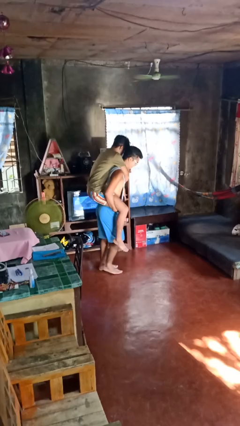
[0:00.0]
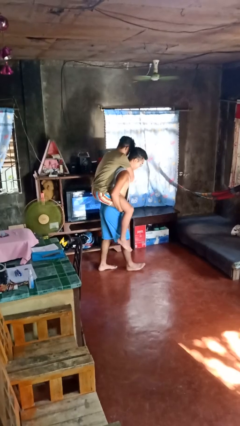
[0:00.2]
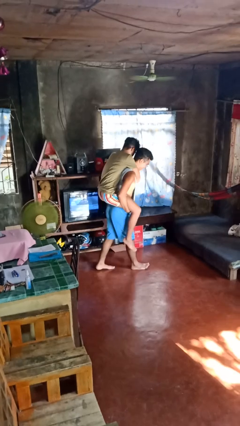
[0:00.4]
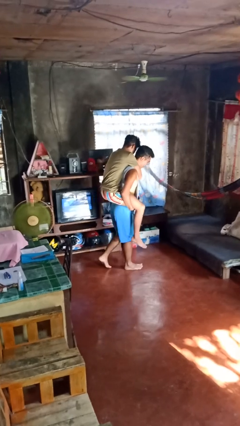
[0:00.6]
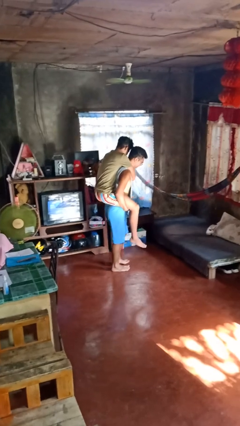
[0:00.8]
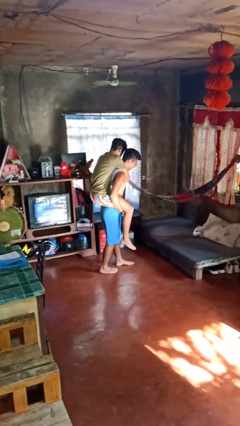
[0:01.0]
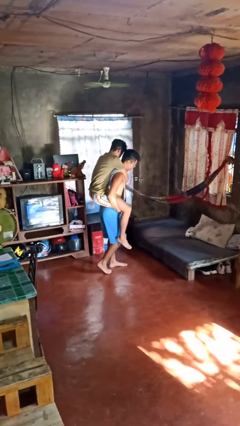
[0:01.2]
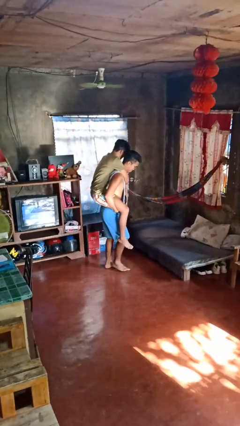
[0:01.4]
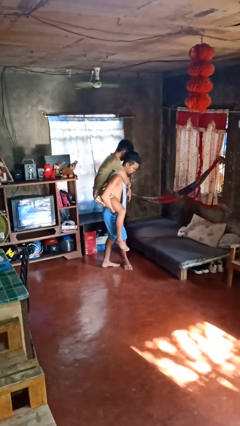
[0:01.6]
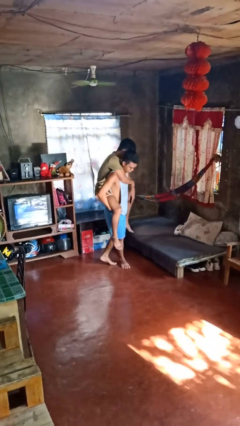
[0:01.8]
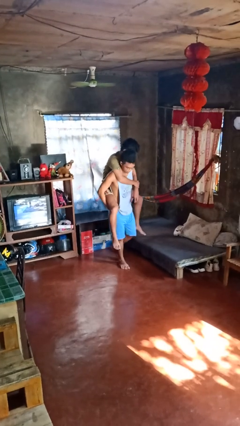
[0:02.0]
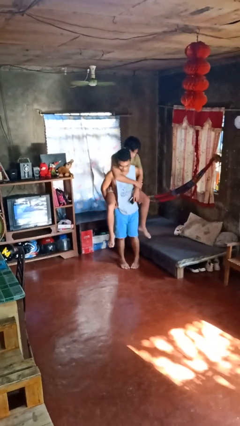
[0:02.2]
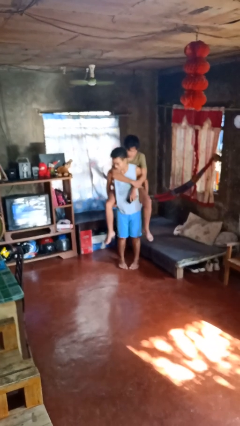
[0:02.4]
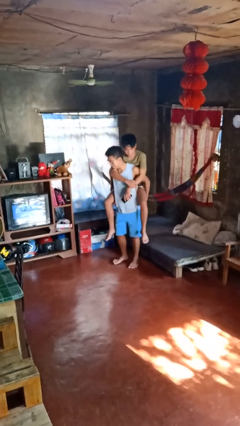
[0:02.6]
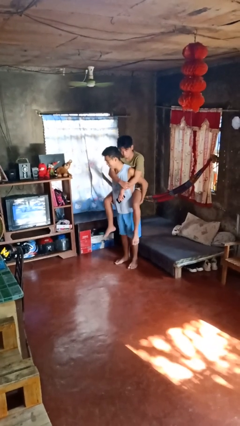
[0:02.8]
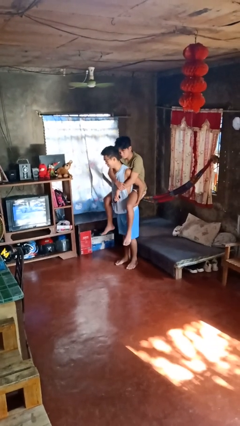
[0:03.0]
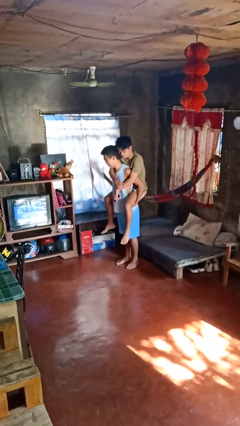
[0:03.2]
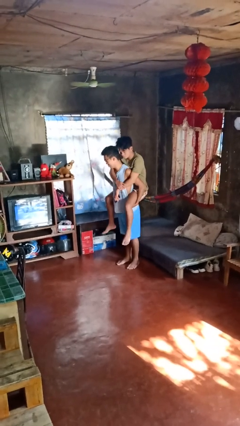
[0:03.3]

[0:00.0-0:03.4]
person carries person on back

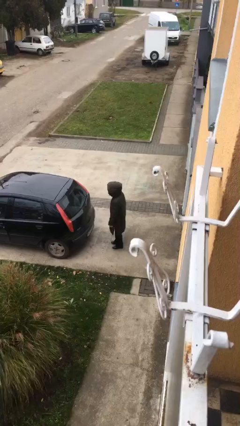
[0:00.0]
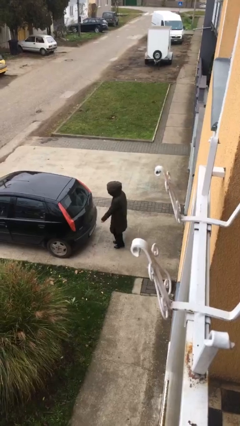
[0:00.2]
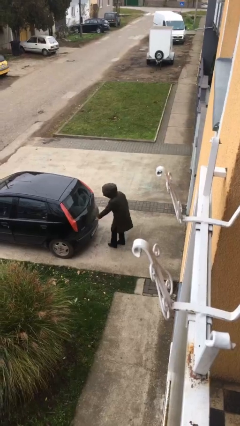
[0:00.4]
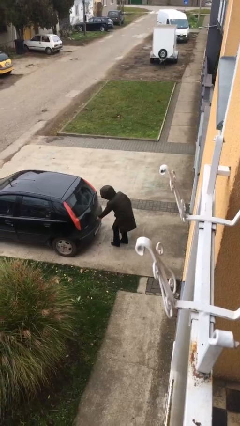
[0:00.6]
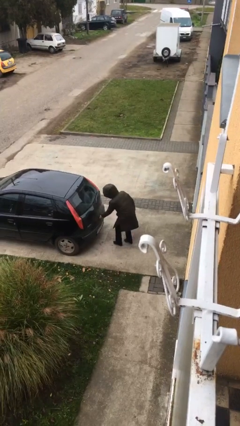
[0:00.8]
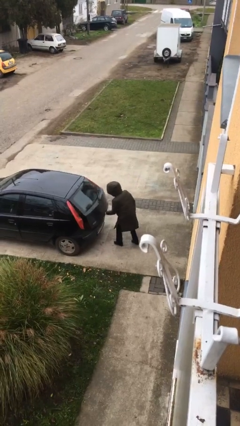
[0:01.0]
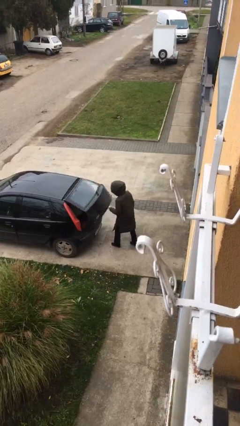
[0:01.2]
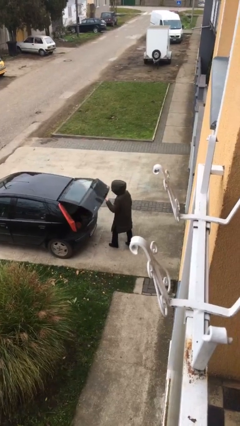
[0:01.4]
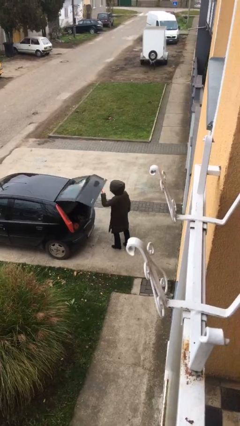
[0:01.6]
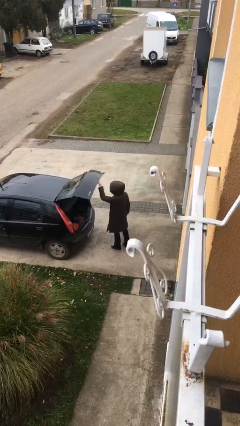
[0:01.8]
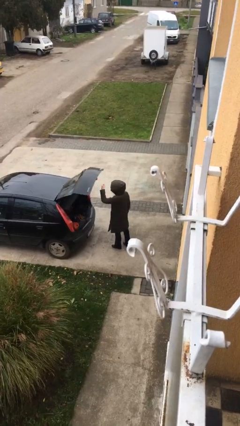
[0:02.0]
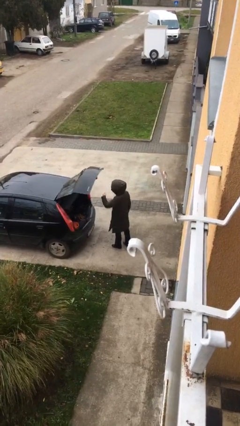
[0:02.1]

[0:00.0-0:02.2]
person opens car trunk

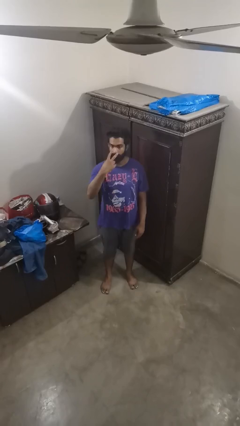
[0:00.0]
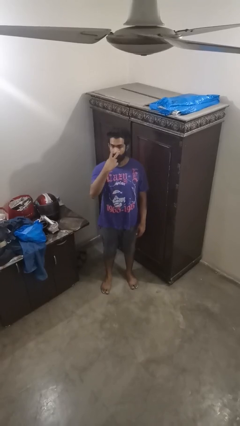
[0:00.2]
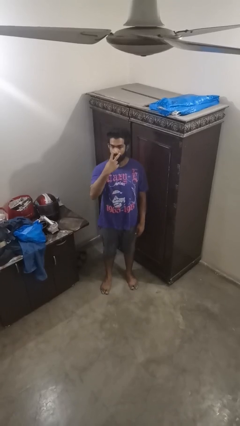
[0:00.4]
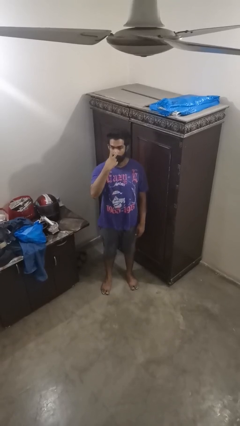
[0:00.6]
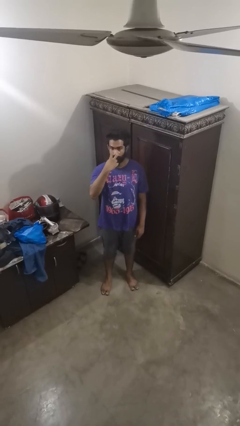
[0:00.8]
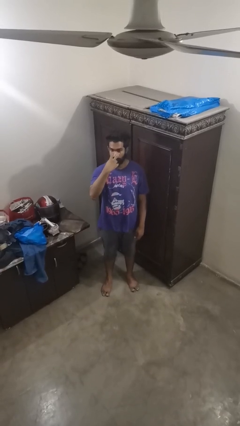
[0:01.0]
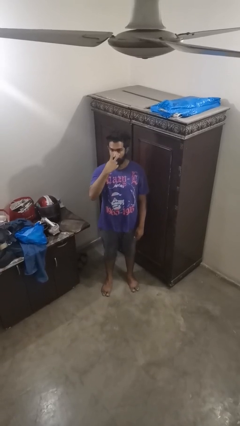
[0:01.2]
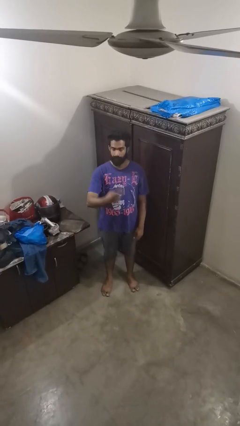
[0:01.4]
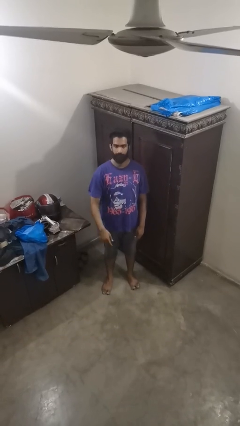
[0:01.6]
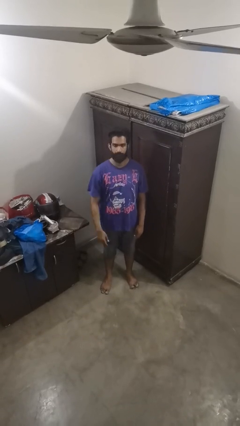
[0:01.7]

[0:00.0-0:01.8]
person gestures watch closely

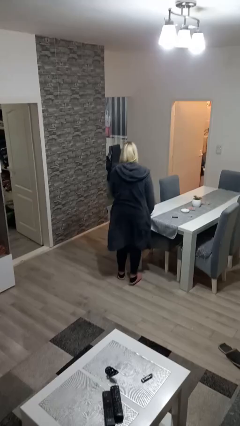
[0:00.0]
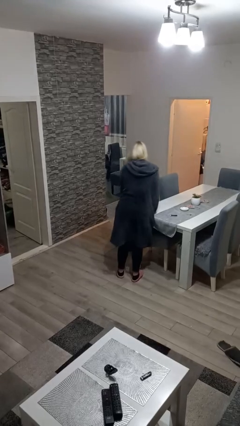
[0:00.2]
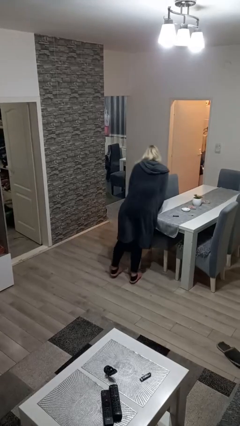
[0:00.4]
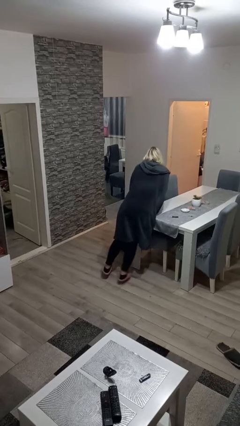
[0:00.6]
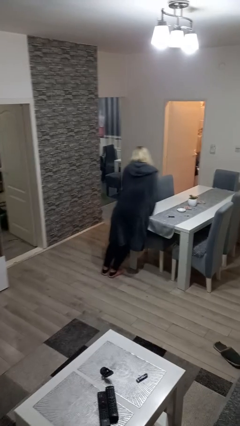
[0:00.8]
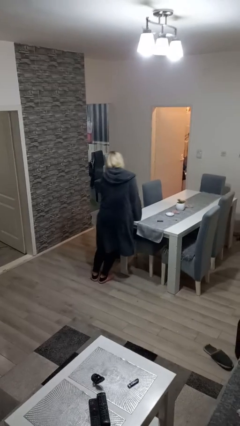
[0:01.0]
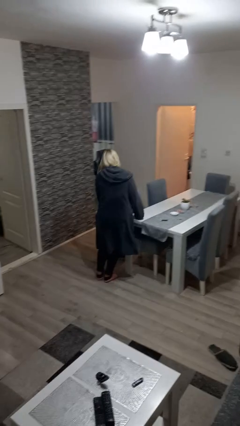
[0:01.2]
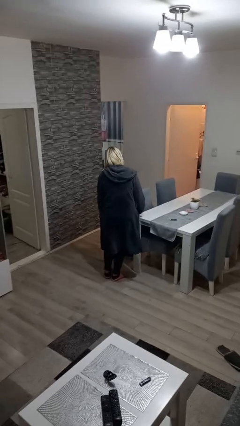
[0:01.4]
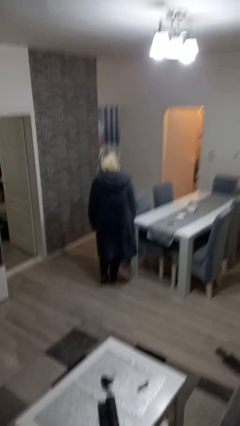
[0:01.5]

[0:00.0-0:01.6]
person bumps into table

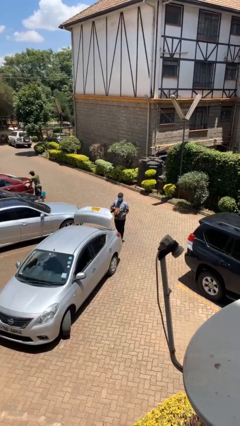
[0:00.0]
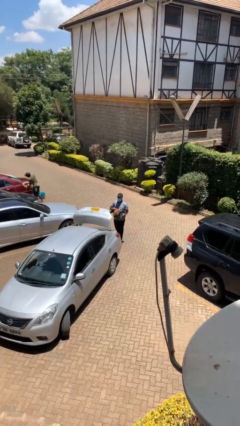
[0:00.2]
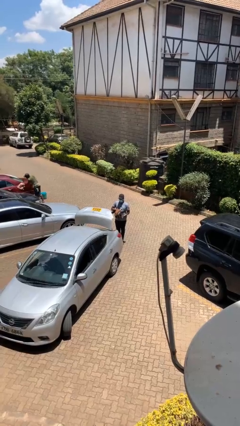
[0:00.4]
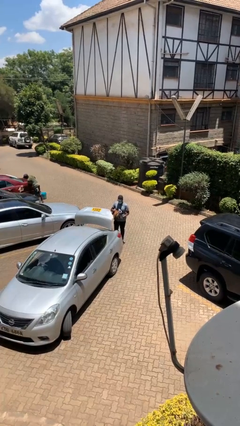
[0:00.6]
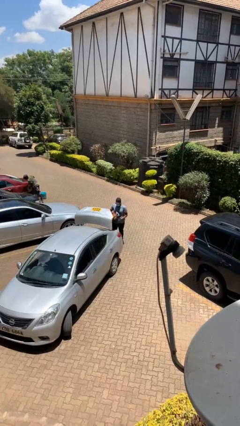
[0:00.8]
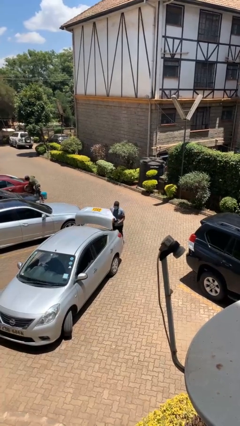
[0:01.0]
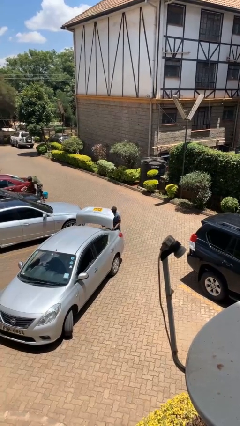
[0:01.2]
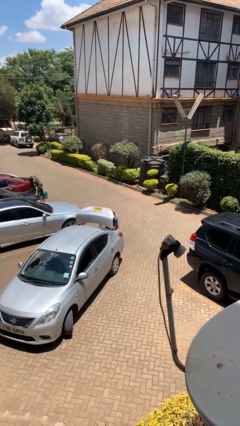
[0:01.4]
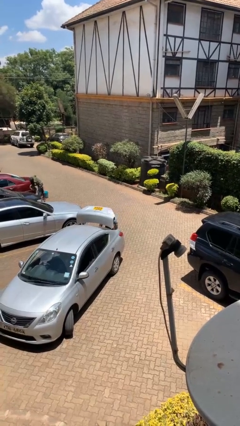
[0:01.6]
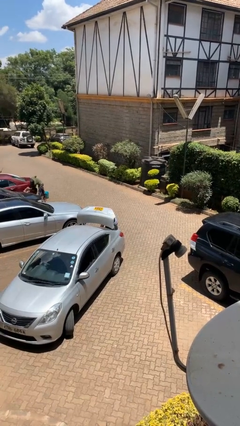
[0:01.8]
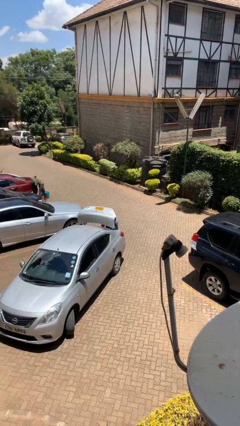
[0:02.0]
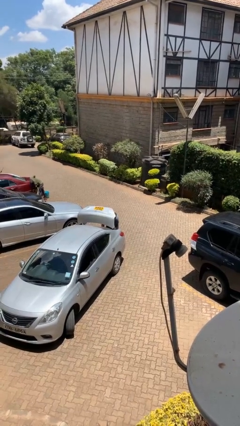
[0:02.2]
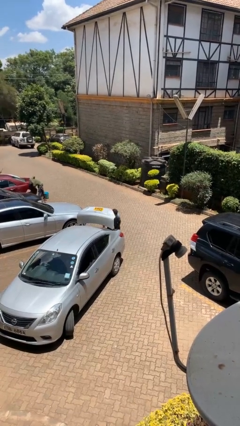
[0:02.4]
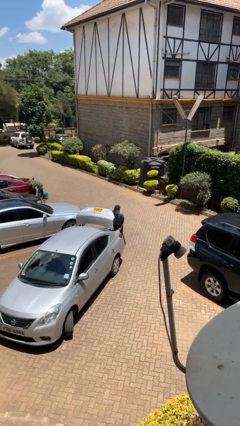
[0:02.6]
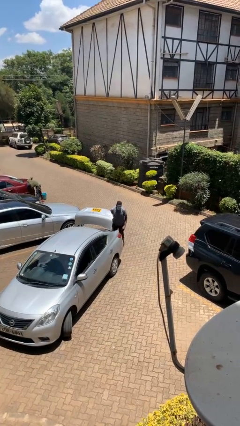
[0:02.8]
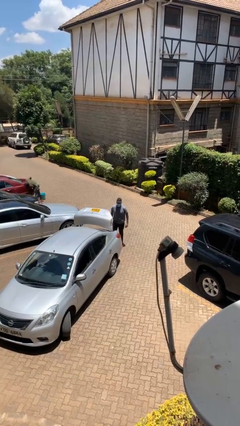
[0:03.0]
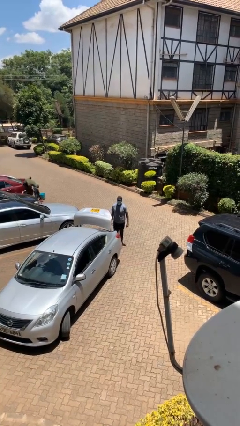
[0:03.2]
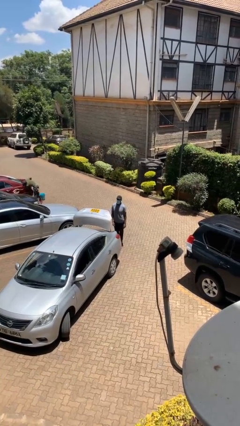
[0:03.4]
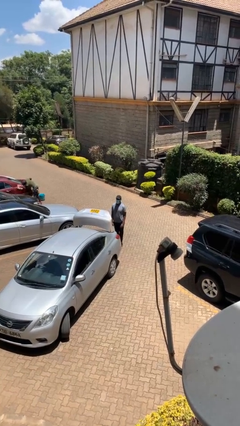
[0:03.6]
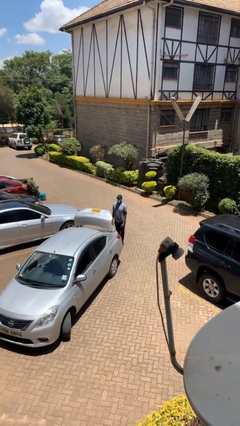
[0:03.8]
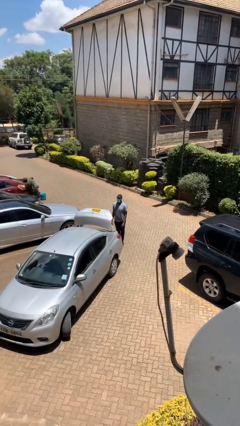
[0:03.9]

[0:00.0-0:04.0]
person loads car

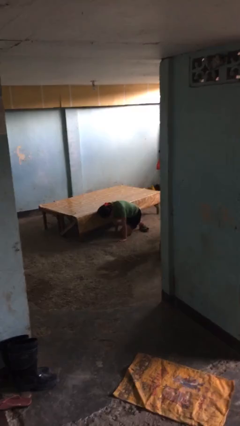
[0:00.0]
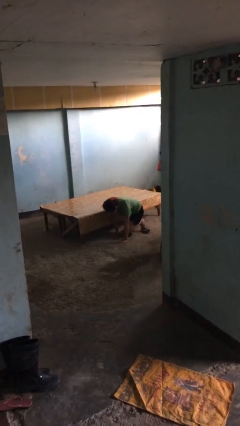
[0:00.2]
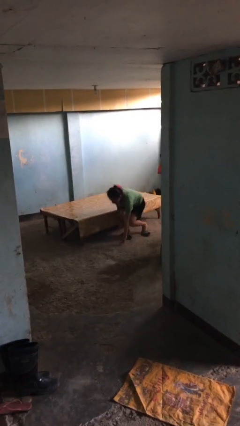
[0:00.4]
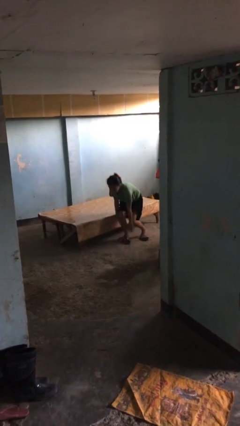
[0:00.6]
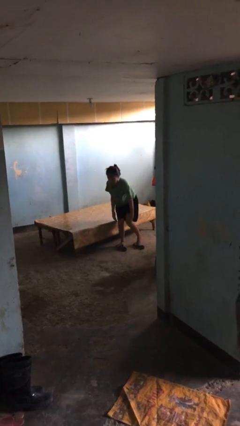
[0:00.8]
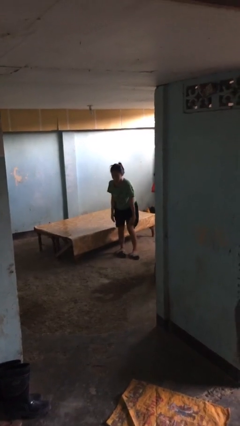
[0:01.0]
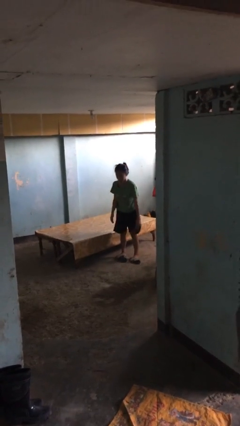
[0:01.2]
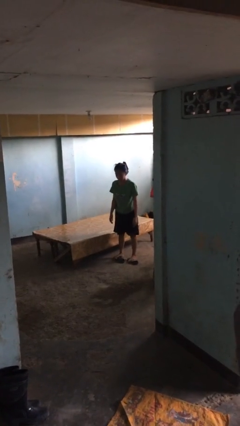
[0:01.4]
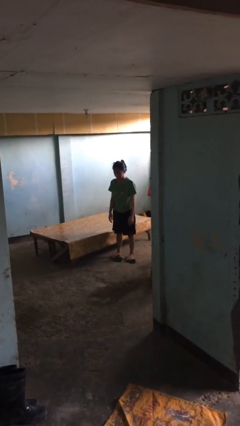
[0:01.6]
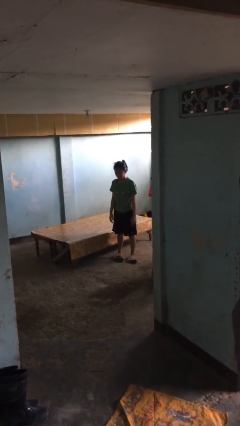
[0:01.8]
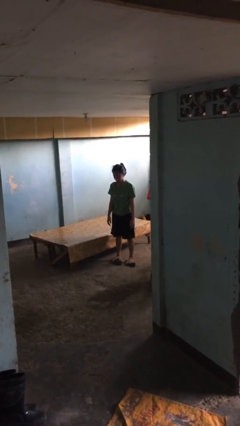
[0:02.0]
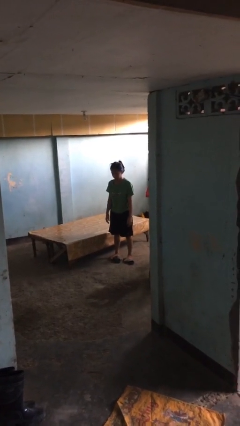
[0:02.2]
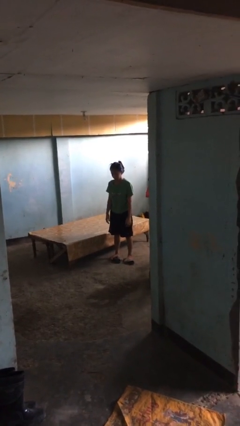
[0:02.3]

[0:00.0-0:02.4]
person stands up from floor

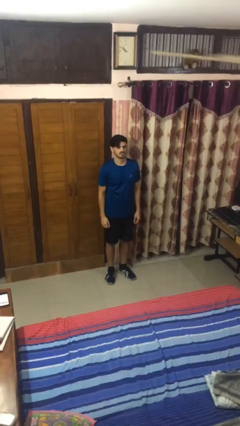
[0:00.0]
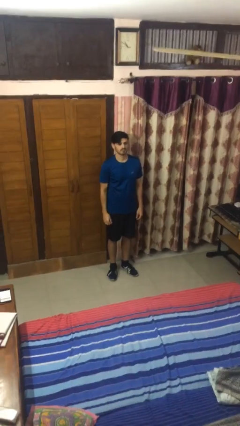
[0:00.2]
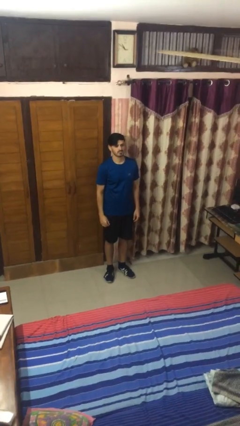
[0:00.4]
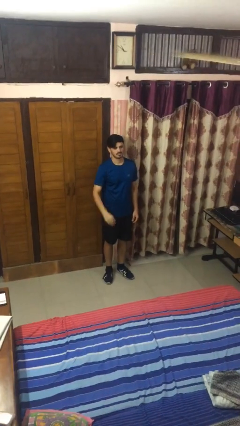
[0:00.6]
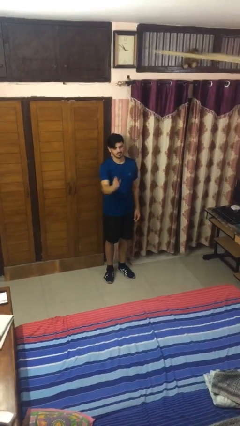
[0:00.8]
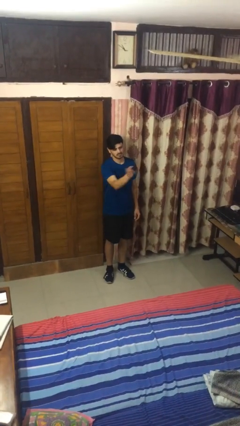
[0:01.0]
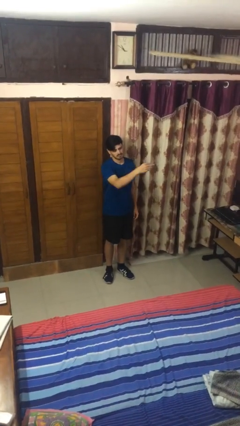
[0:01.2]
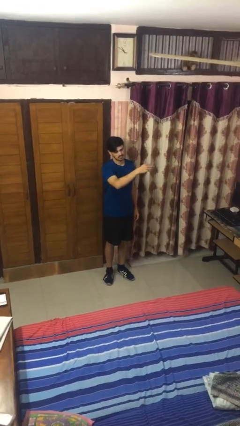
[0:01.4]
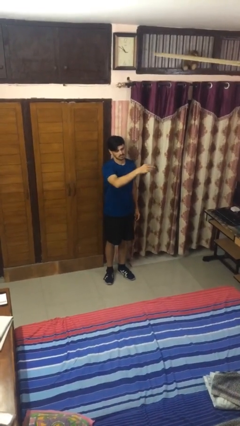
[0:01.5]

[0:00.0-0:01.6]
person gestures swipe left
